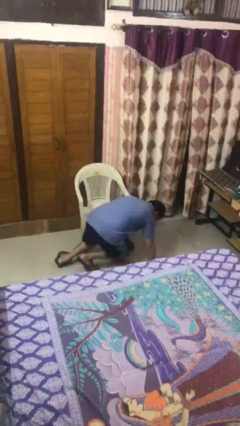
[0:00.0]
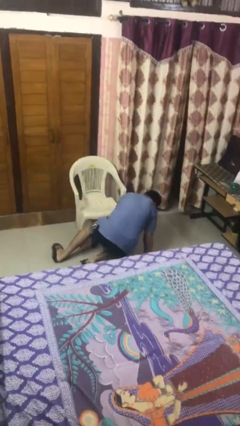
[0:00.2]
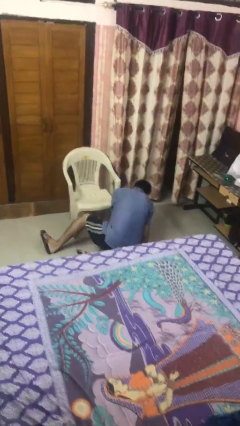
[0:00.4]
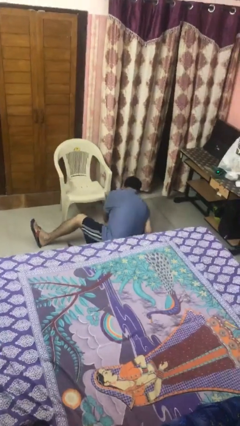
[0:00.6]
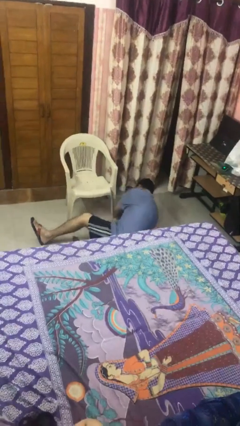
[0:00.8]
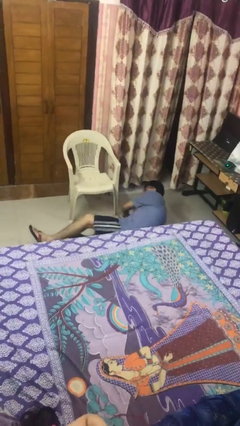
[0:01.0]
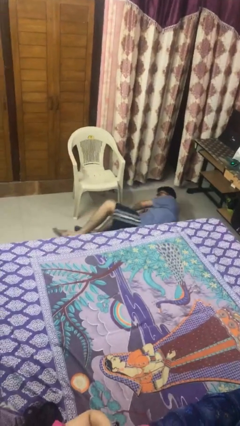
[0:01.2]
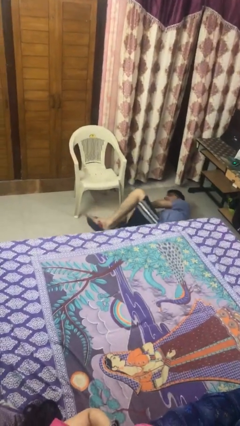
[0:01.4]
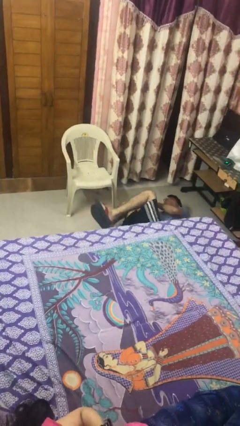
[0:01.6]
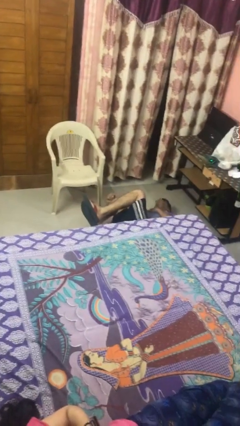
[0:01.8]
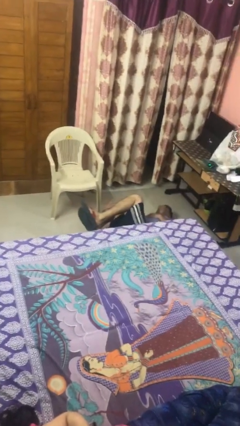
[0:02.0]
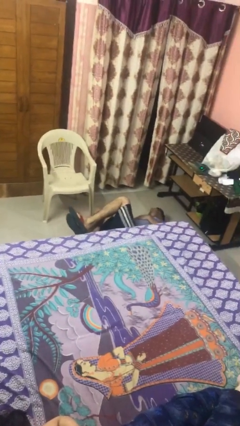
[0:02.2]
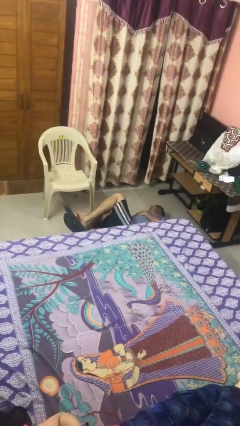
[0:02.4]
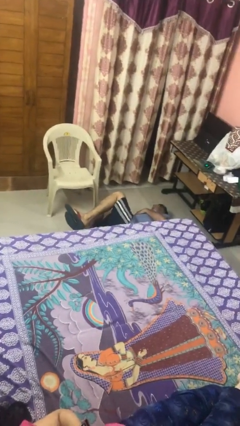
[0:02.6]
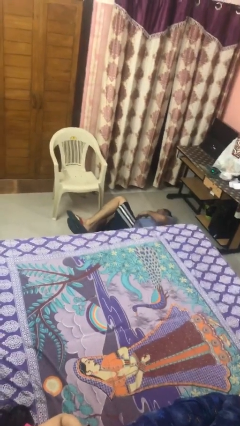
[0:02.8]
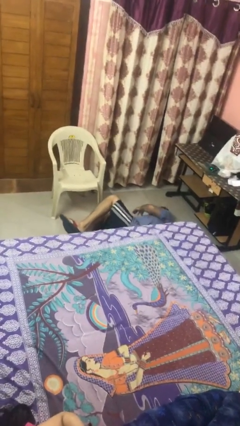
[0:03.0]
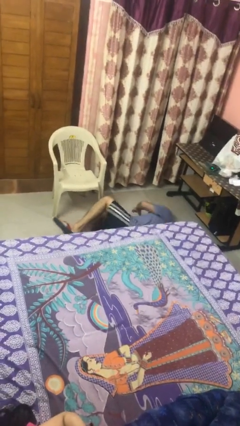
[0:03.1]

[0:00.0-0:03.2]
person lies down on floor

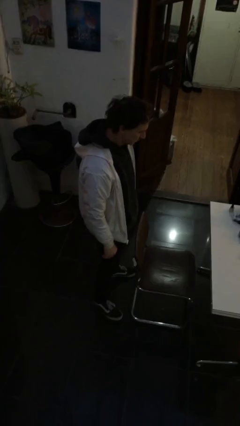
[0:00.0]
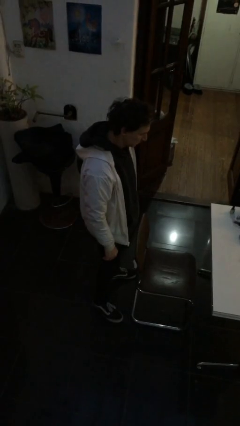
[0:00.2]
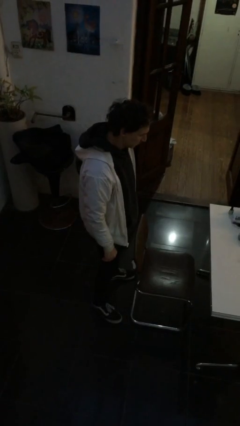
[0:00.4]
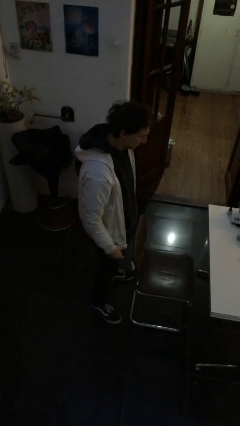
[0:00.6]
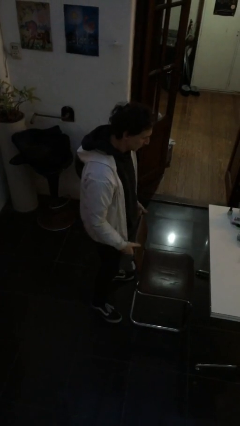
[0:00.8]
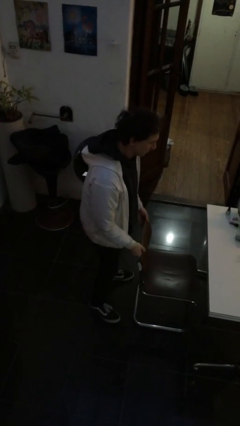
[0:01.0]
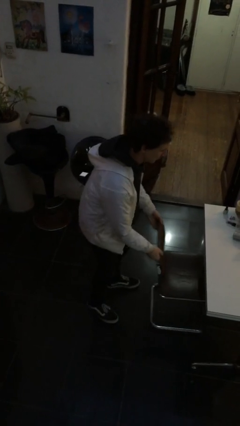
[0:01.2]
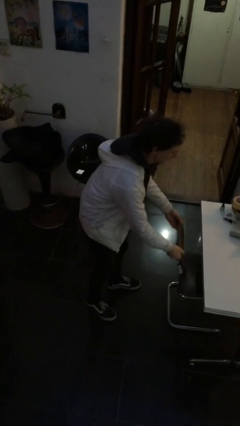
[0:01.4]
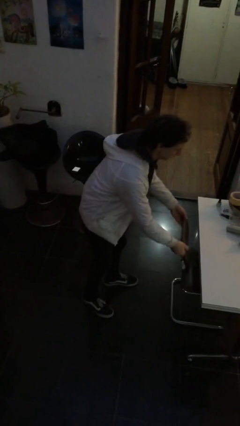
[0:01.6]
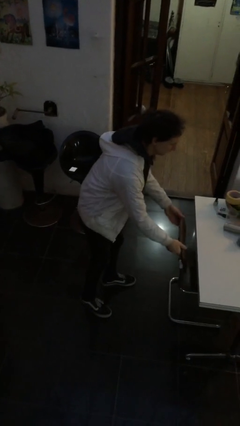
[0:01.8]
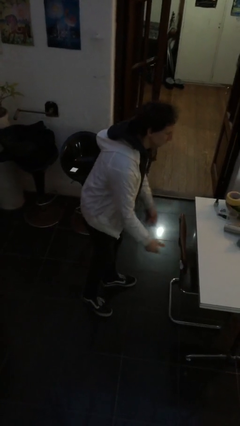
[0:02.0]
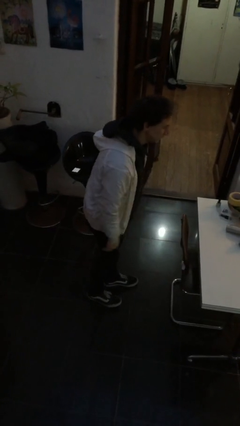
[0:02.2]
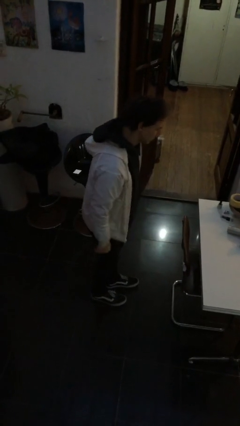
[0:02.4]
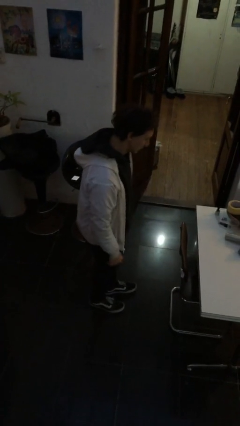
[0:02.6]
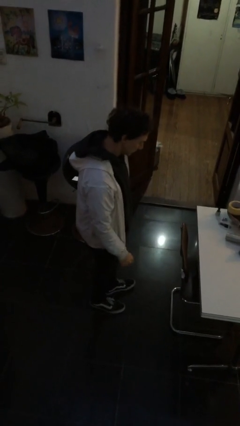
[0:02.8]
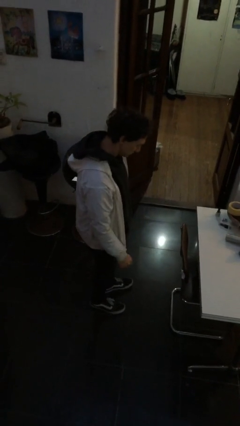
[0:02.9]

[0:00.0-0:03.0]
person pushes in chair

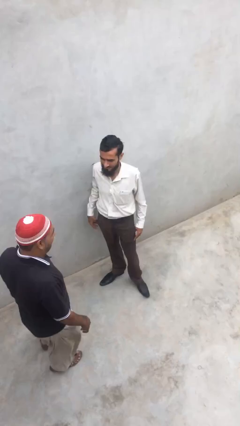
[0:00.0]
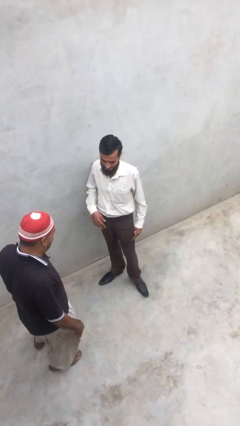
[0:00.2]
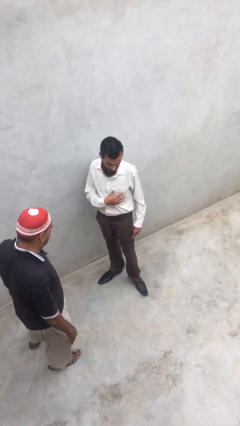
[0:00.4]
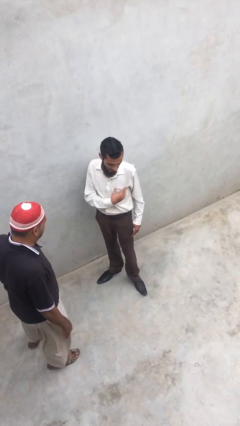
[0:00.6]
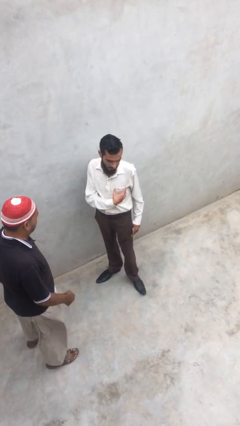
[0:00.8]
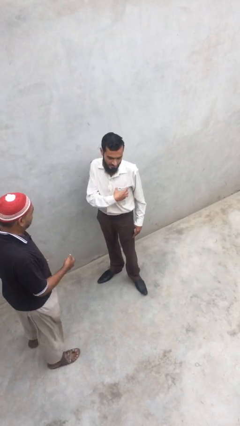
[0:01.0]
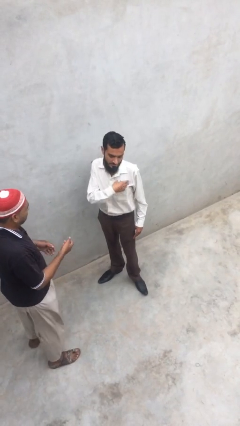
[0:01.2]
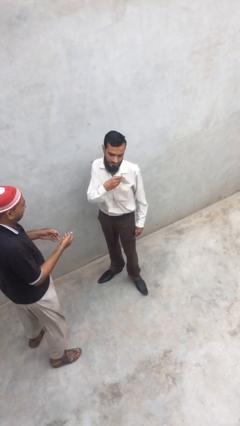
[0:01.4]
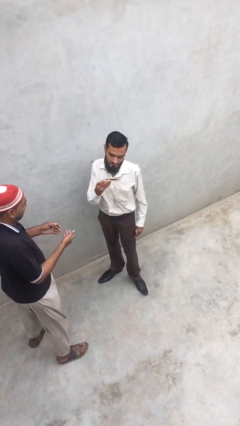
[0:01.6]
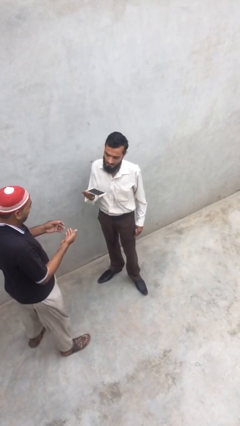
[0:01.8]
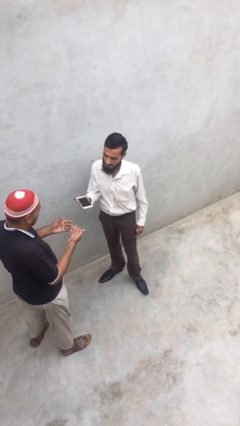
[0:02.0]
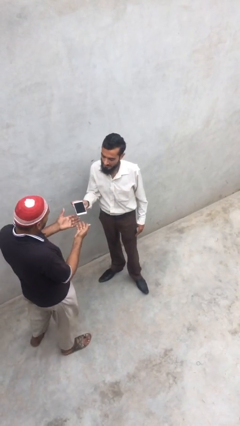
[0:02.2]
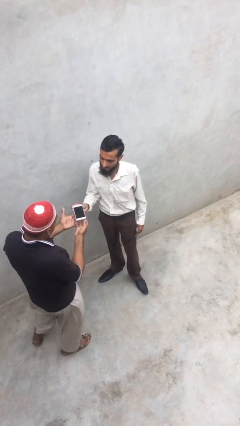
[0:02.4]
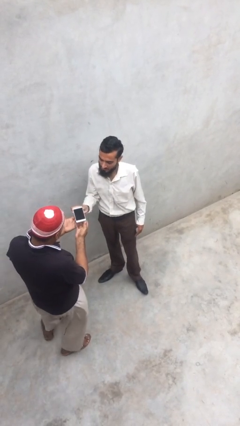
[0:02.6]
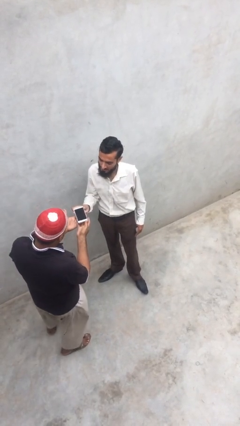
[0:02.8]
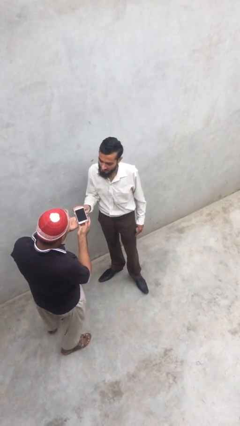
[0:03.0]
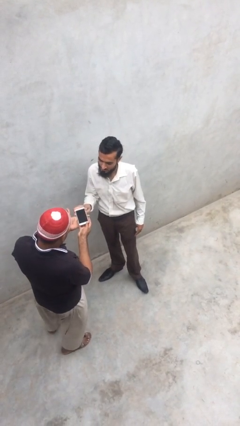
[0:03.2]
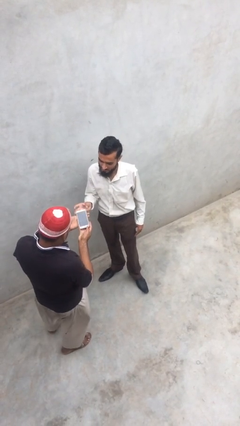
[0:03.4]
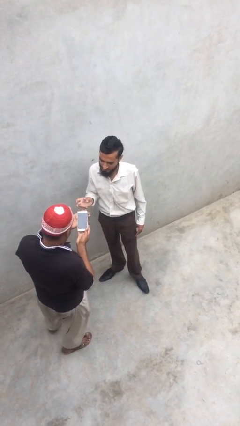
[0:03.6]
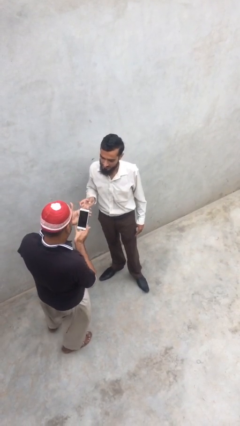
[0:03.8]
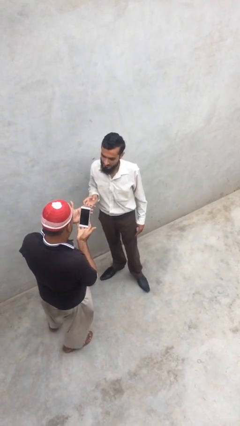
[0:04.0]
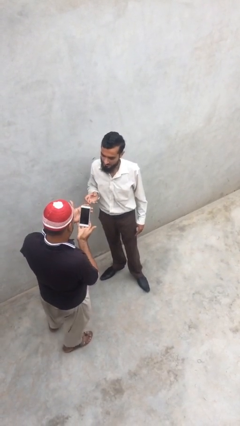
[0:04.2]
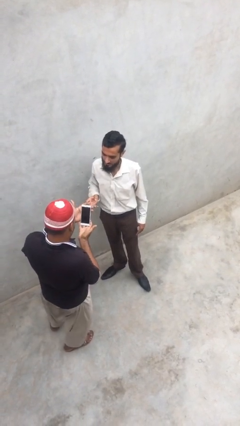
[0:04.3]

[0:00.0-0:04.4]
person transfers object to person

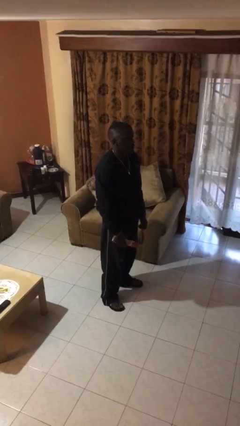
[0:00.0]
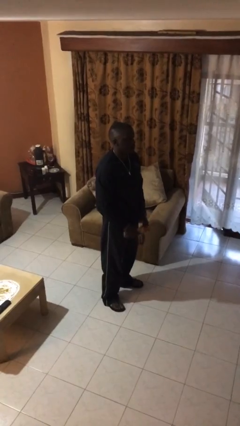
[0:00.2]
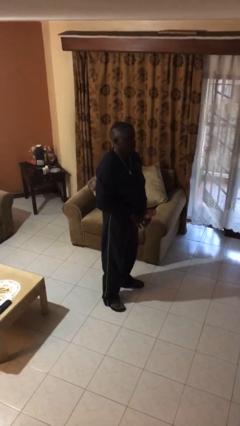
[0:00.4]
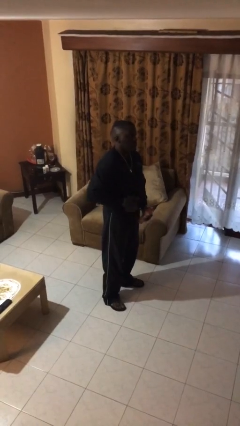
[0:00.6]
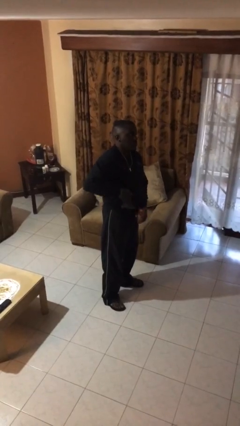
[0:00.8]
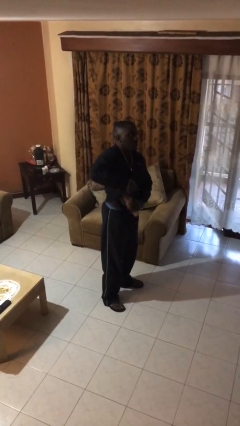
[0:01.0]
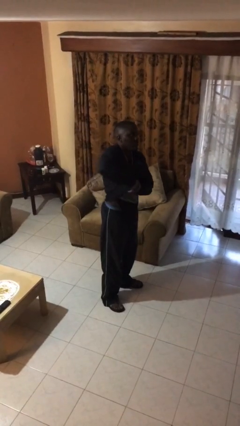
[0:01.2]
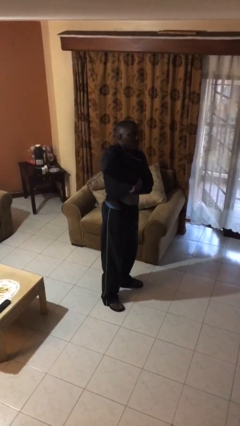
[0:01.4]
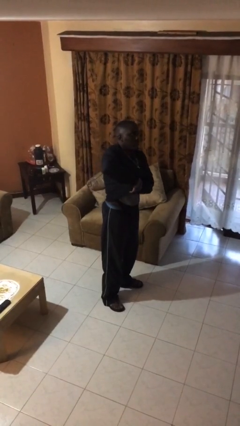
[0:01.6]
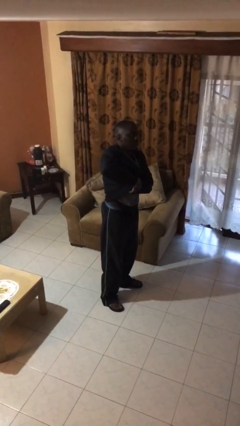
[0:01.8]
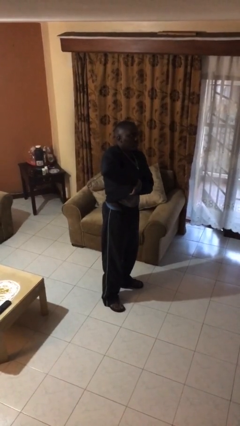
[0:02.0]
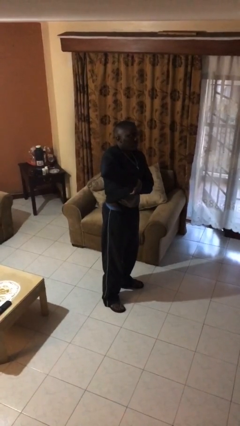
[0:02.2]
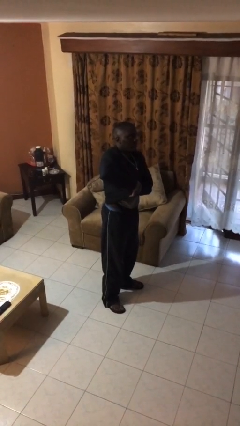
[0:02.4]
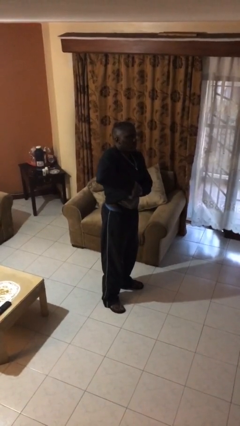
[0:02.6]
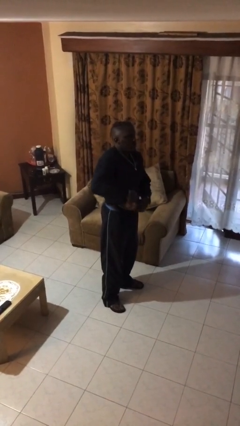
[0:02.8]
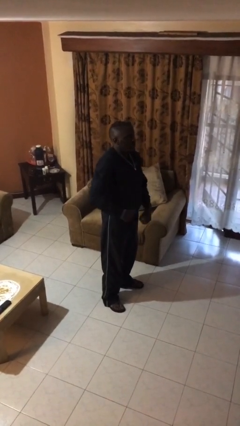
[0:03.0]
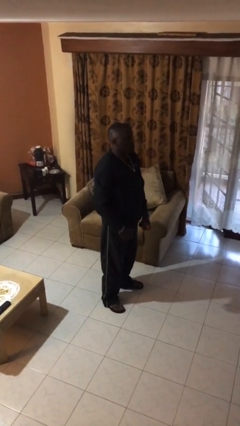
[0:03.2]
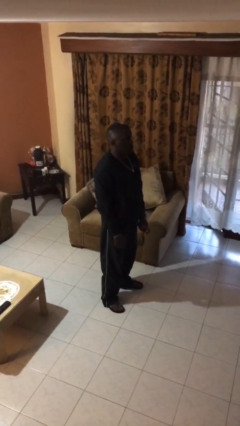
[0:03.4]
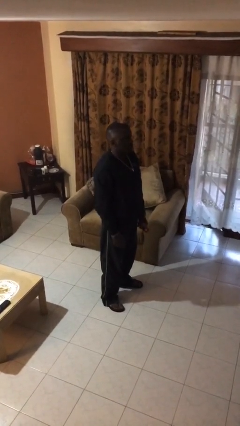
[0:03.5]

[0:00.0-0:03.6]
person applies deodorant

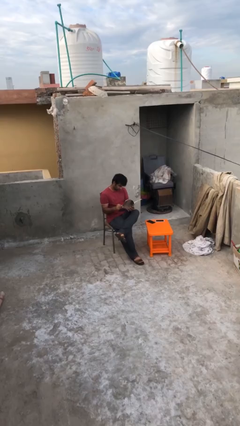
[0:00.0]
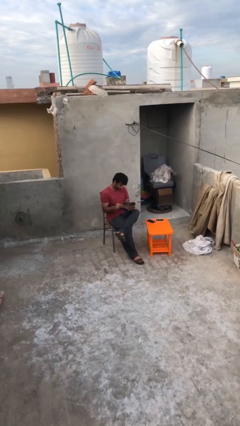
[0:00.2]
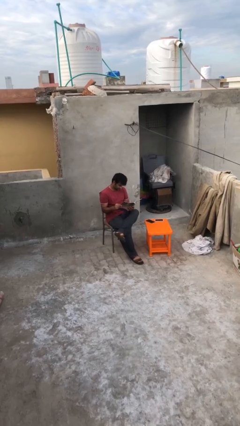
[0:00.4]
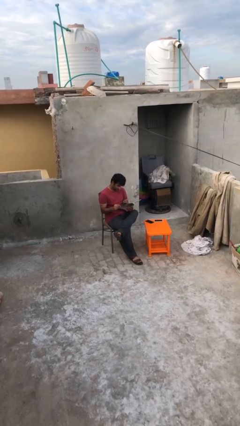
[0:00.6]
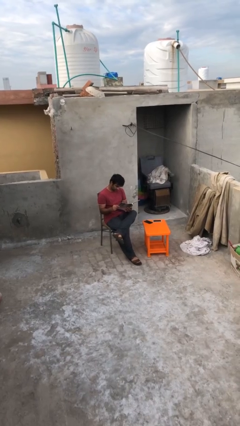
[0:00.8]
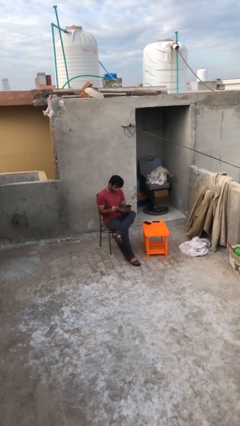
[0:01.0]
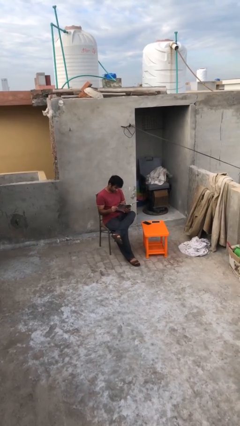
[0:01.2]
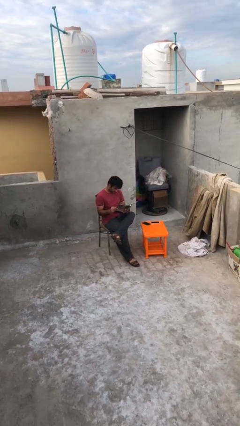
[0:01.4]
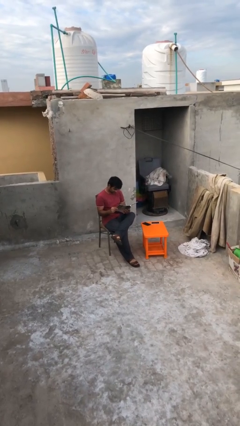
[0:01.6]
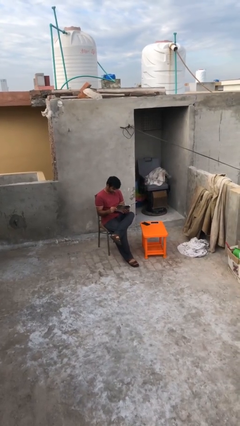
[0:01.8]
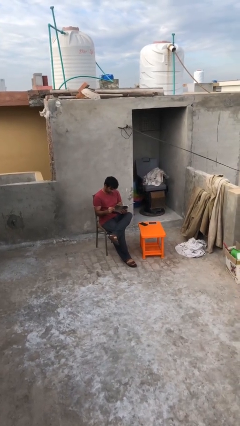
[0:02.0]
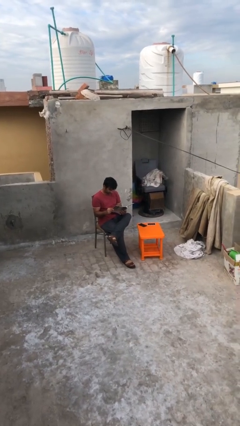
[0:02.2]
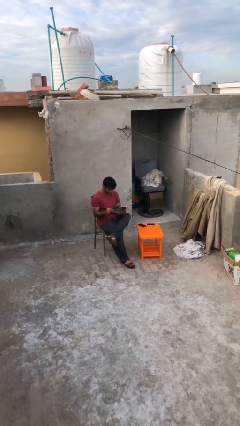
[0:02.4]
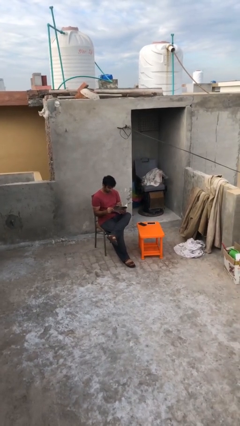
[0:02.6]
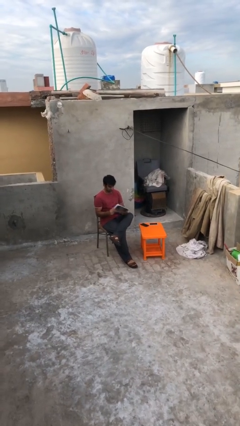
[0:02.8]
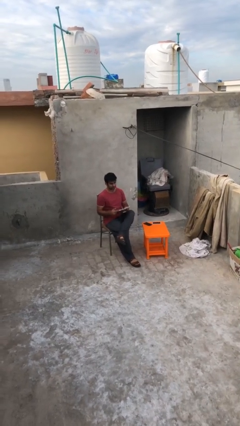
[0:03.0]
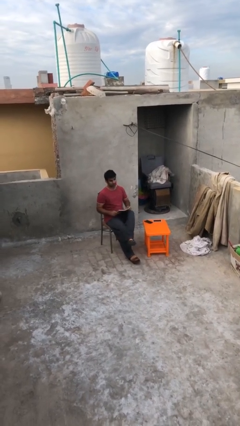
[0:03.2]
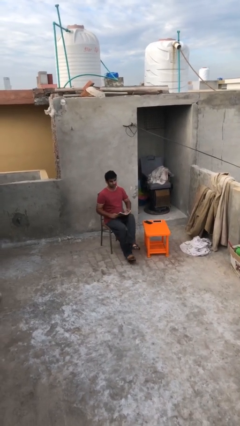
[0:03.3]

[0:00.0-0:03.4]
person reads document
